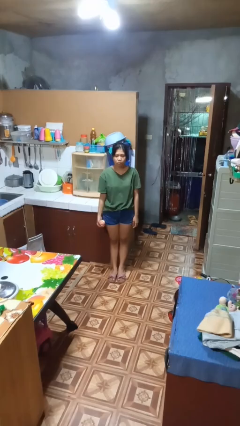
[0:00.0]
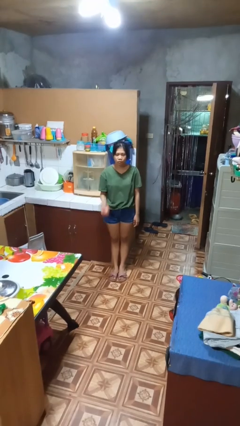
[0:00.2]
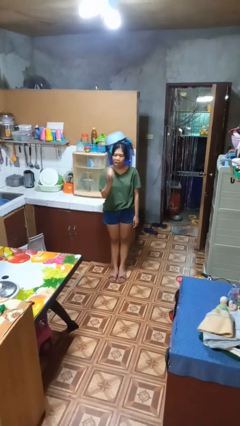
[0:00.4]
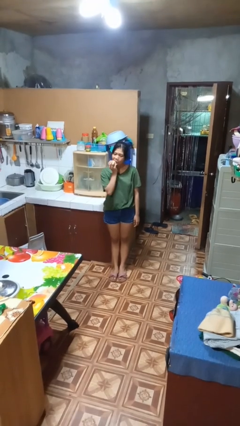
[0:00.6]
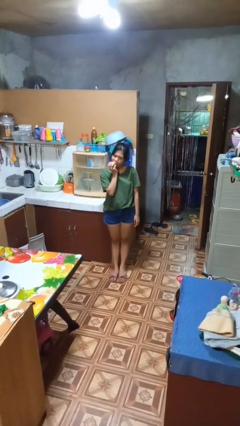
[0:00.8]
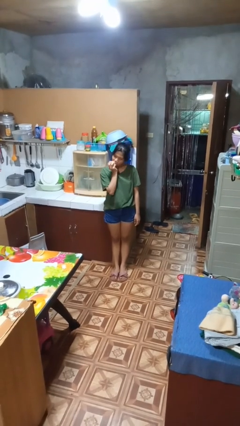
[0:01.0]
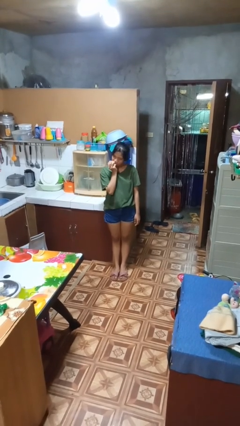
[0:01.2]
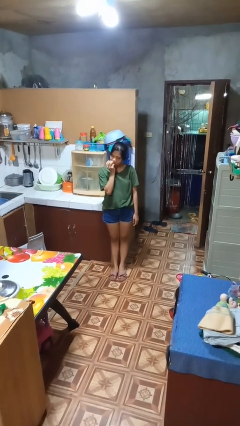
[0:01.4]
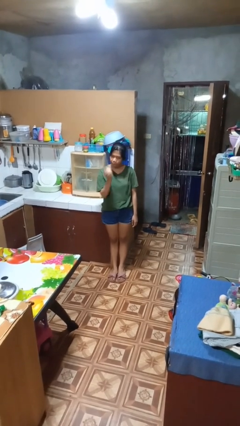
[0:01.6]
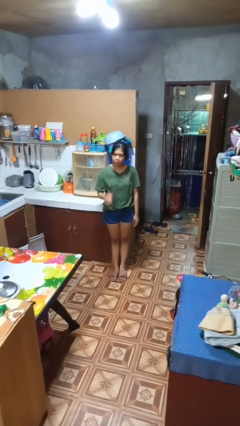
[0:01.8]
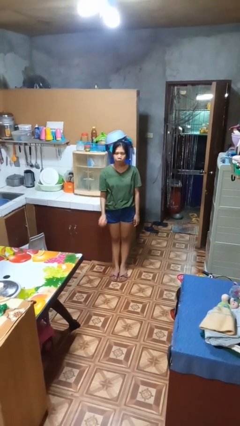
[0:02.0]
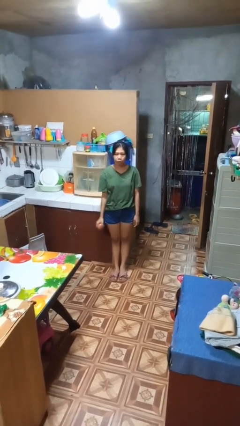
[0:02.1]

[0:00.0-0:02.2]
person eats apple

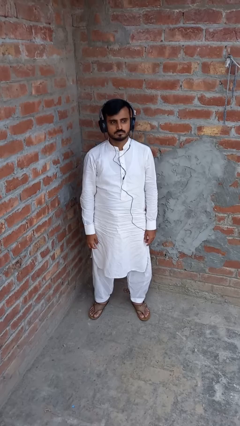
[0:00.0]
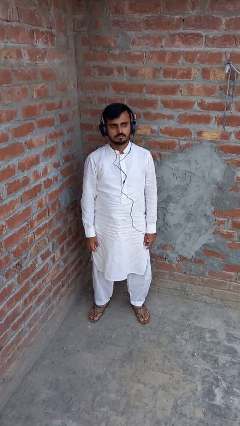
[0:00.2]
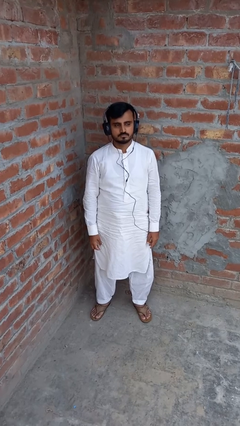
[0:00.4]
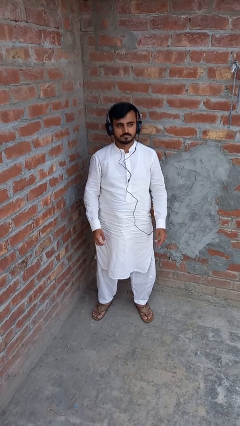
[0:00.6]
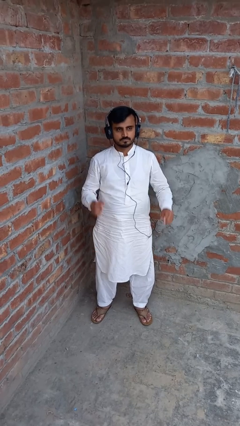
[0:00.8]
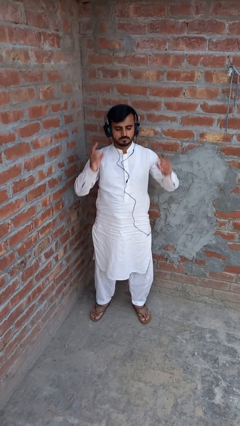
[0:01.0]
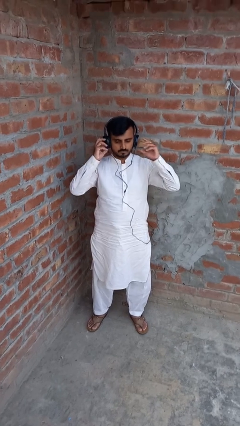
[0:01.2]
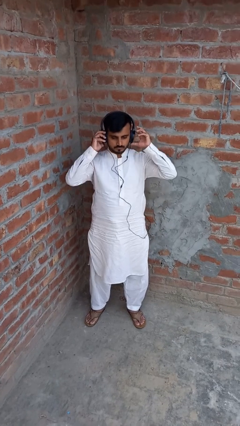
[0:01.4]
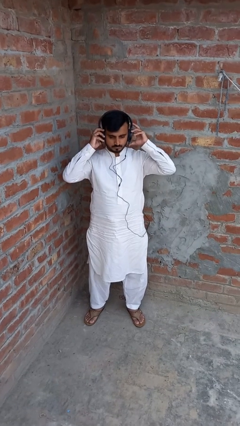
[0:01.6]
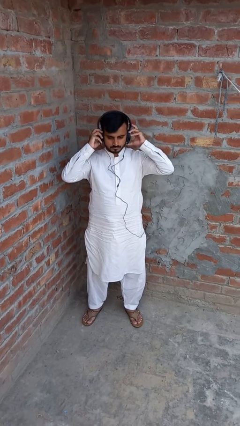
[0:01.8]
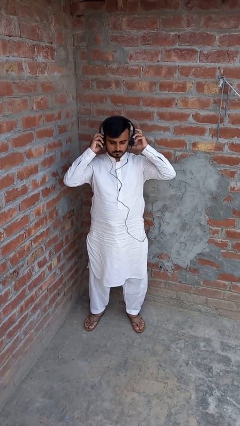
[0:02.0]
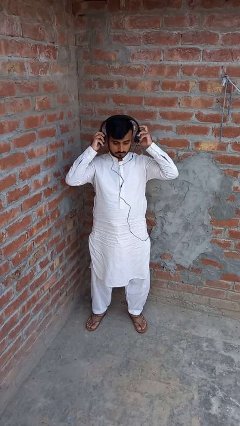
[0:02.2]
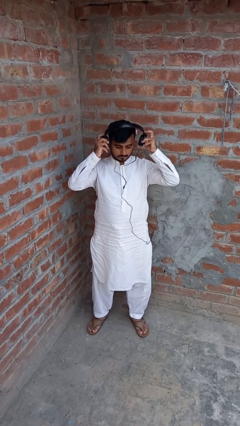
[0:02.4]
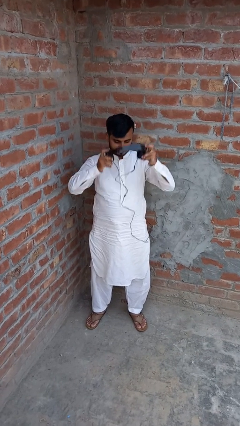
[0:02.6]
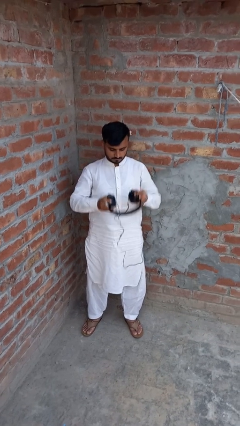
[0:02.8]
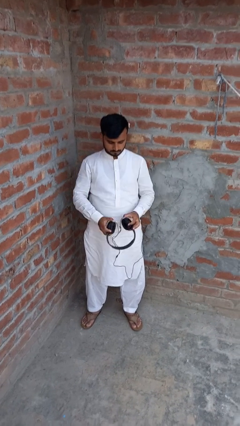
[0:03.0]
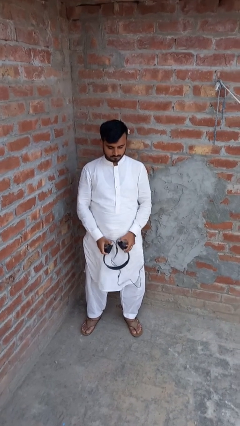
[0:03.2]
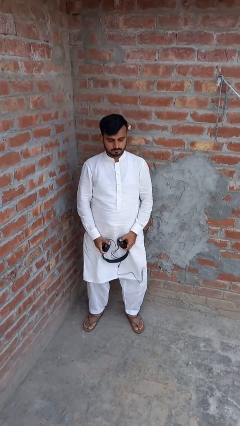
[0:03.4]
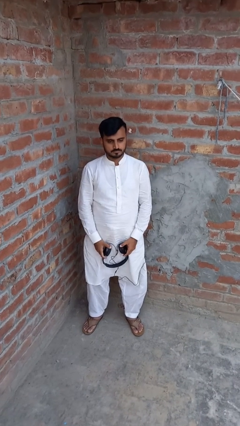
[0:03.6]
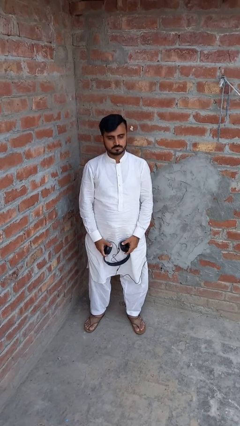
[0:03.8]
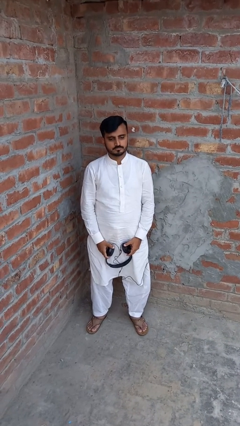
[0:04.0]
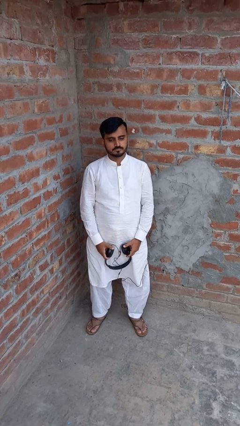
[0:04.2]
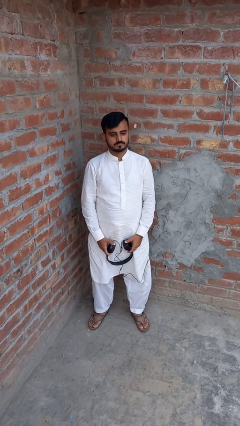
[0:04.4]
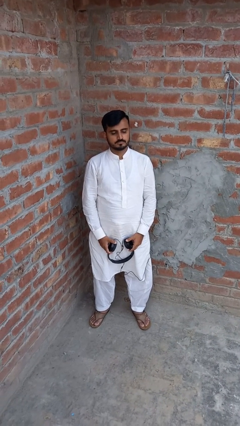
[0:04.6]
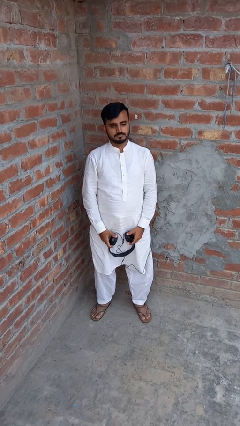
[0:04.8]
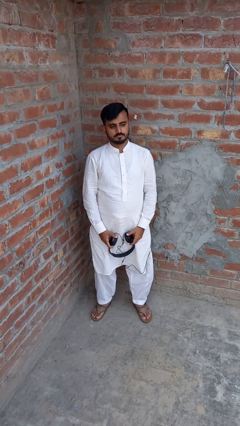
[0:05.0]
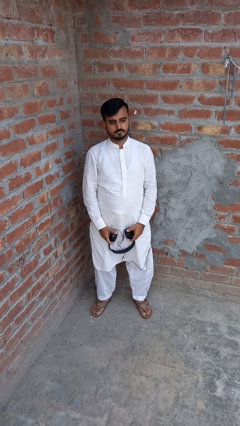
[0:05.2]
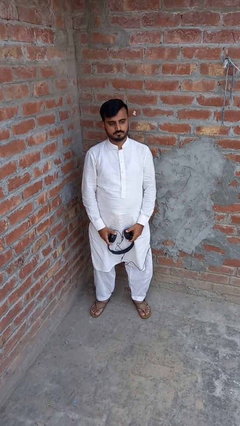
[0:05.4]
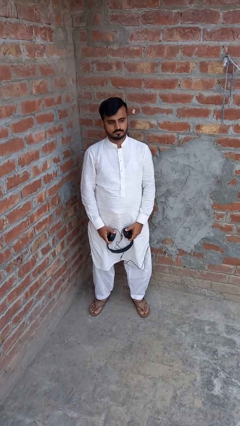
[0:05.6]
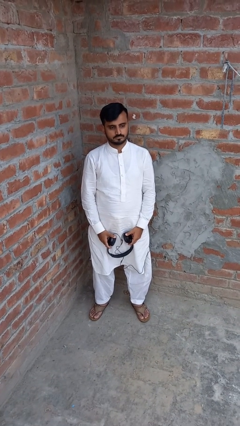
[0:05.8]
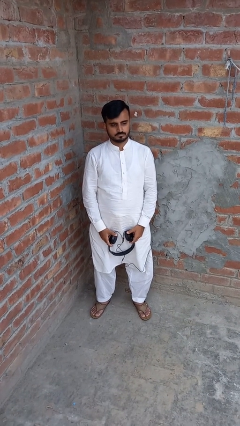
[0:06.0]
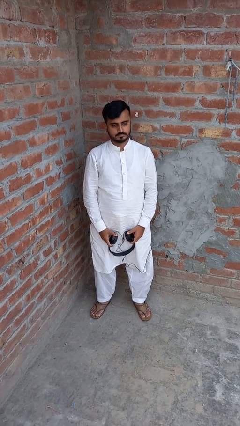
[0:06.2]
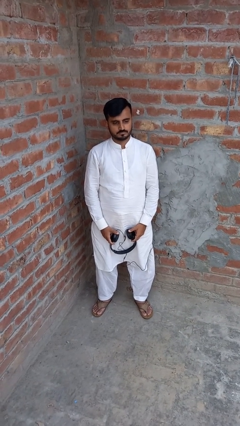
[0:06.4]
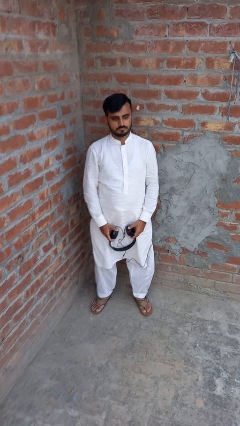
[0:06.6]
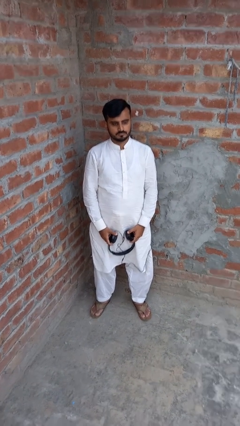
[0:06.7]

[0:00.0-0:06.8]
person takes off headphones

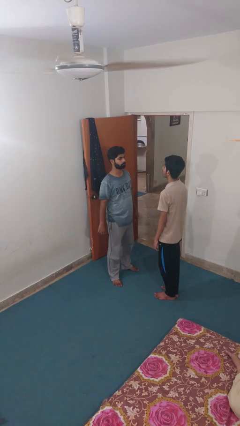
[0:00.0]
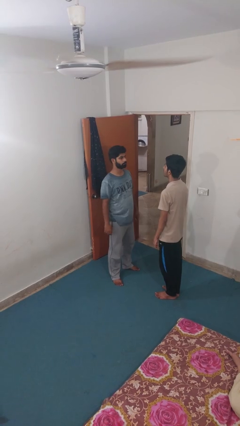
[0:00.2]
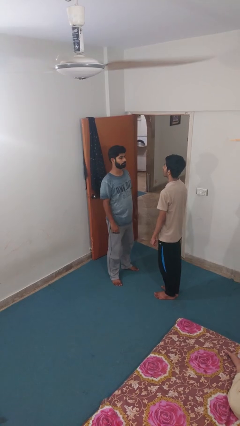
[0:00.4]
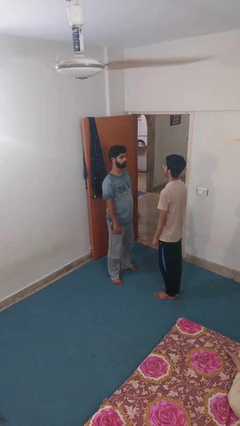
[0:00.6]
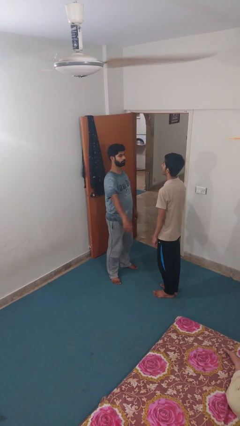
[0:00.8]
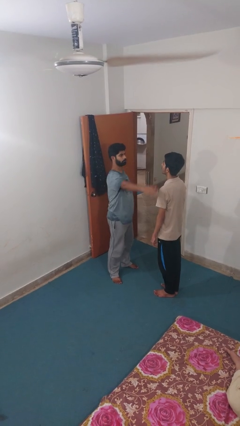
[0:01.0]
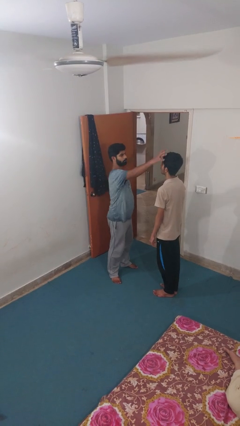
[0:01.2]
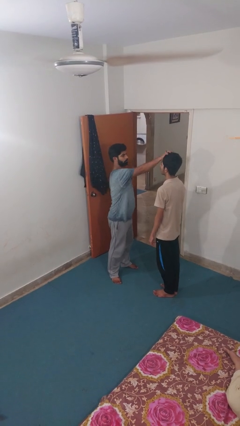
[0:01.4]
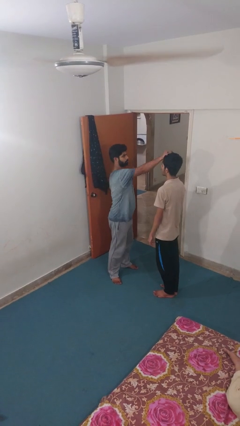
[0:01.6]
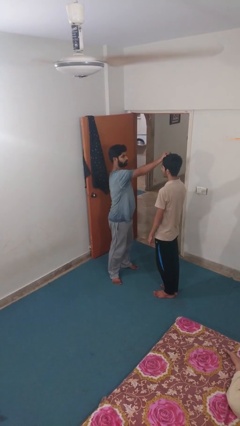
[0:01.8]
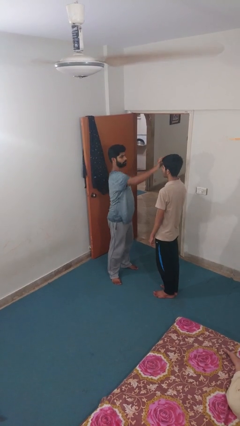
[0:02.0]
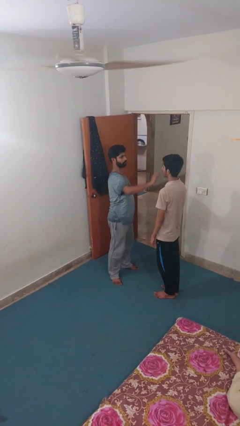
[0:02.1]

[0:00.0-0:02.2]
person grabs person by hair

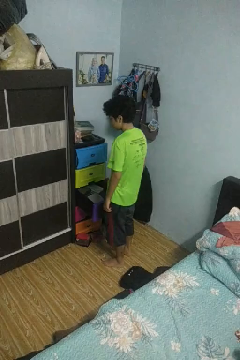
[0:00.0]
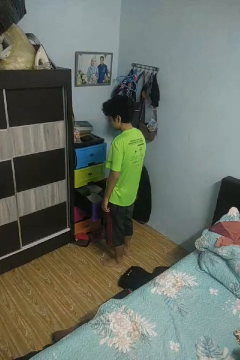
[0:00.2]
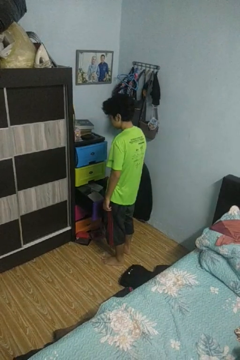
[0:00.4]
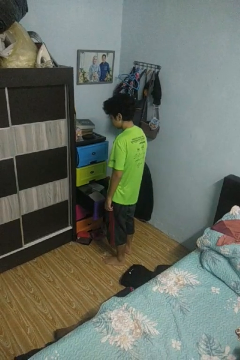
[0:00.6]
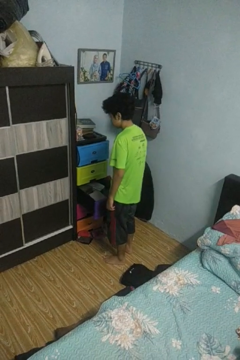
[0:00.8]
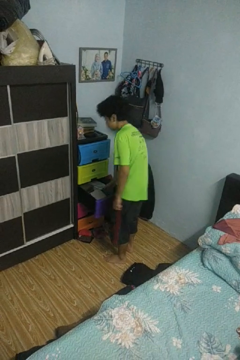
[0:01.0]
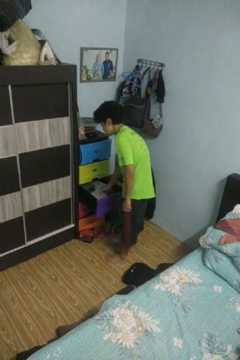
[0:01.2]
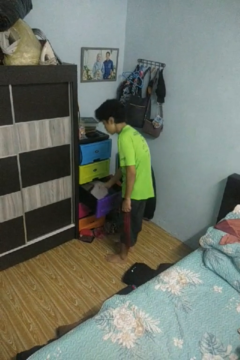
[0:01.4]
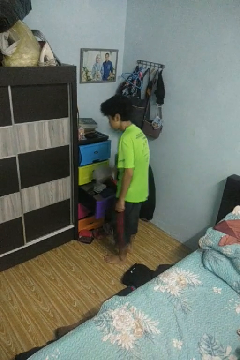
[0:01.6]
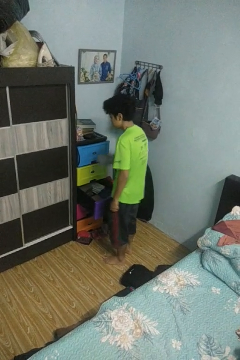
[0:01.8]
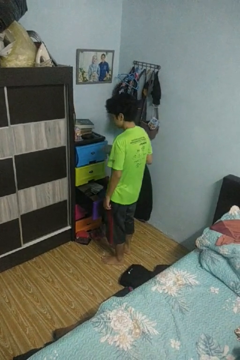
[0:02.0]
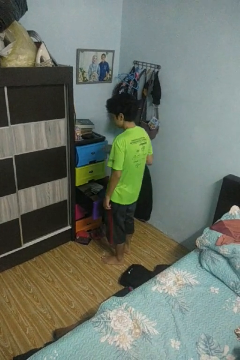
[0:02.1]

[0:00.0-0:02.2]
person takes clothes from dresser

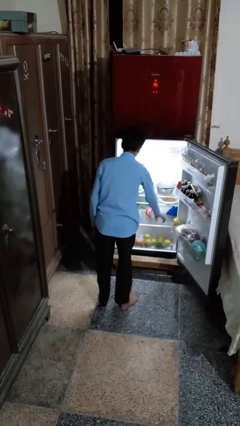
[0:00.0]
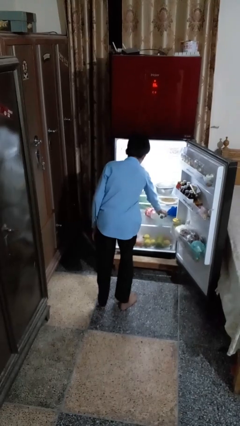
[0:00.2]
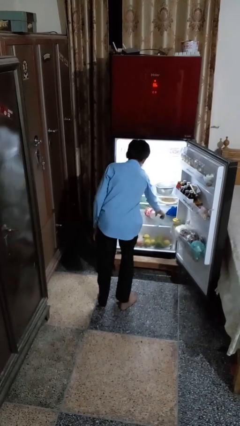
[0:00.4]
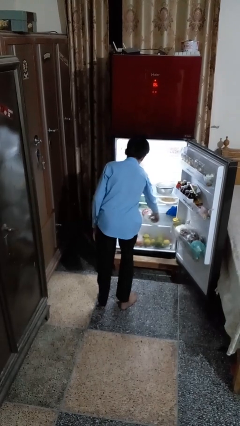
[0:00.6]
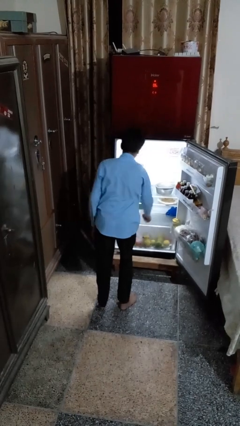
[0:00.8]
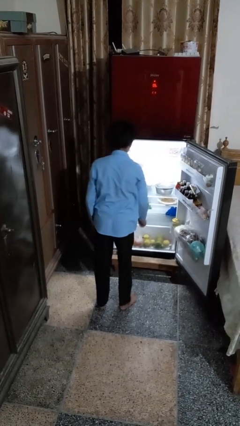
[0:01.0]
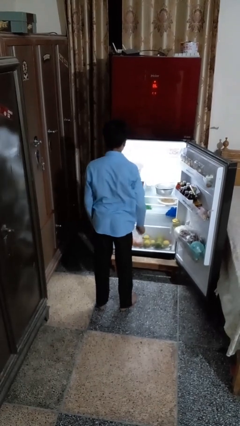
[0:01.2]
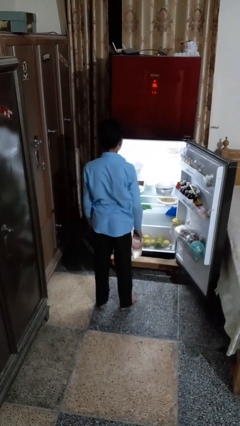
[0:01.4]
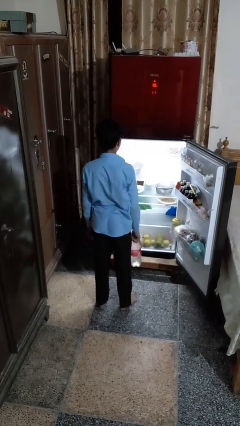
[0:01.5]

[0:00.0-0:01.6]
person takes object from refrigerator

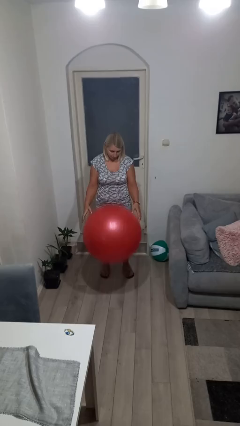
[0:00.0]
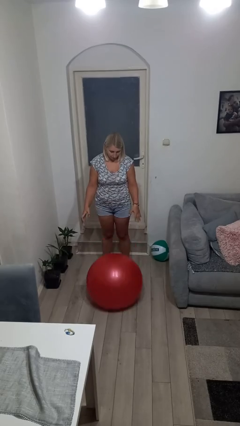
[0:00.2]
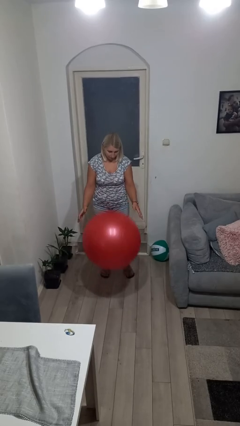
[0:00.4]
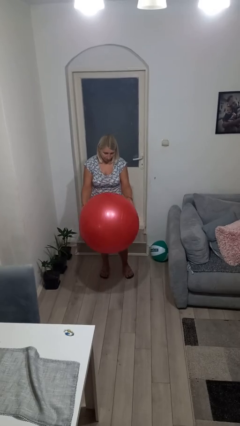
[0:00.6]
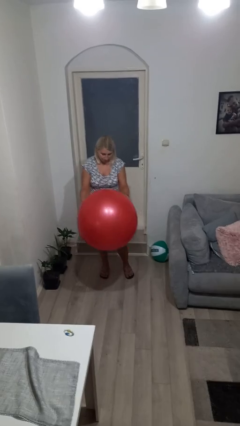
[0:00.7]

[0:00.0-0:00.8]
person bounces ball on floor

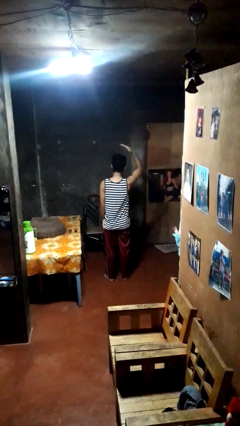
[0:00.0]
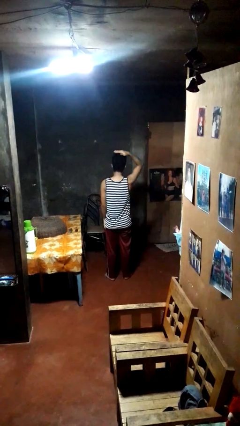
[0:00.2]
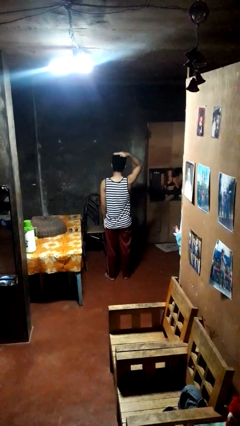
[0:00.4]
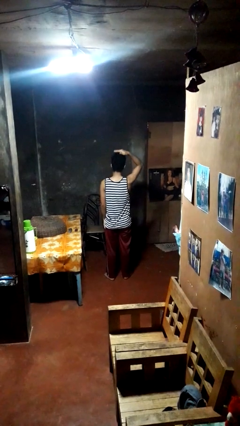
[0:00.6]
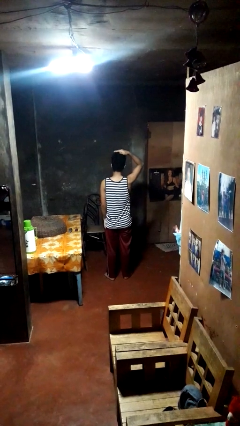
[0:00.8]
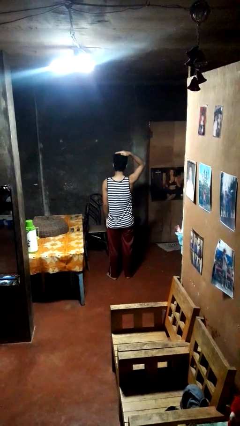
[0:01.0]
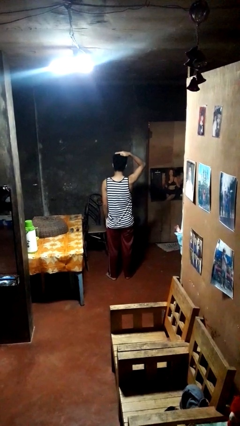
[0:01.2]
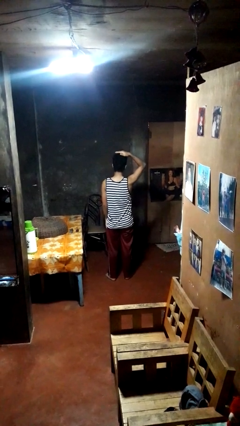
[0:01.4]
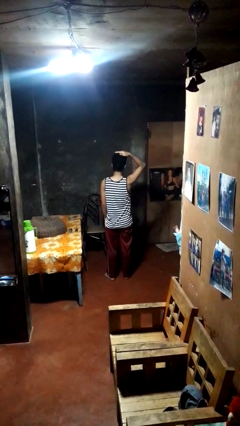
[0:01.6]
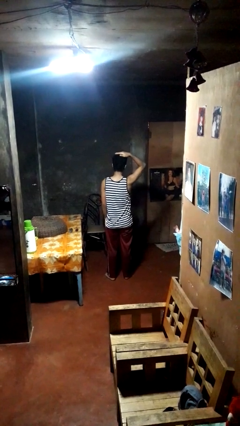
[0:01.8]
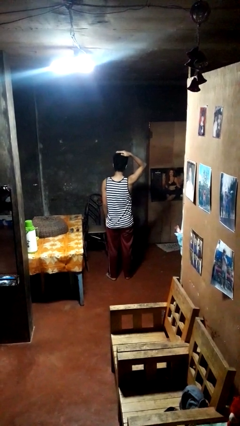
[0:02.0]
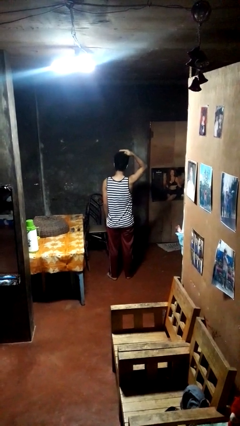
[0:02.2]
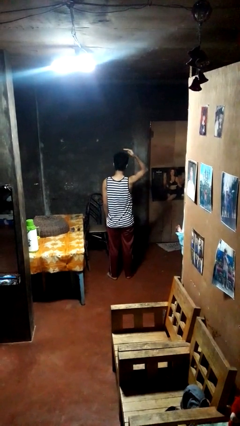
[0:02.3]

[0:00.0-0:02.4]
person pats head
